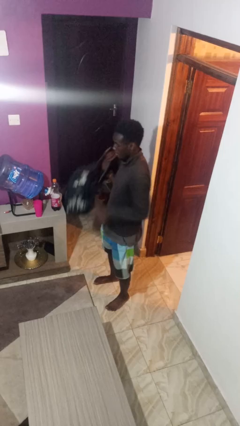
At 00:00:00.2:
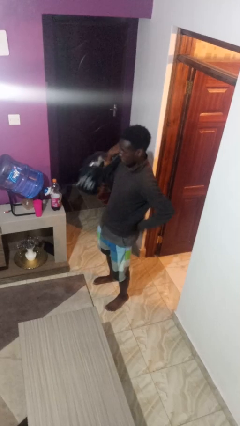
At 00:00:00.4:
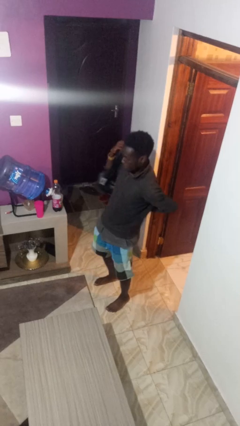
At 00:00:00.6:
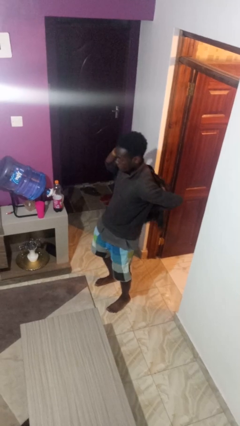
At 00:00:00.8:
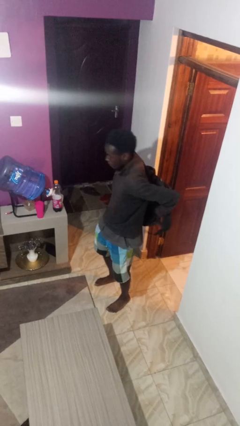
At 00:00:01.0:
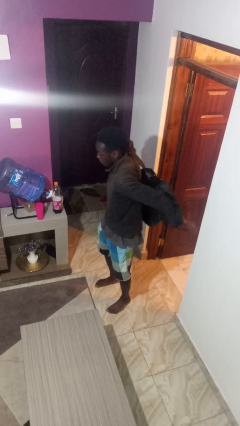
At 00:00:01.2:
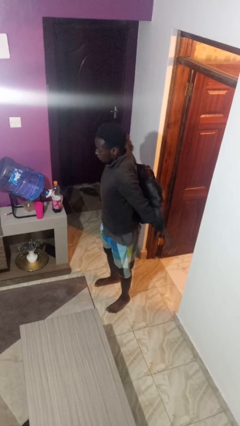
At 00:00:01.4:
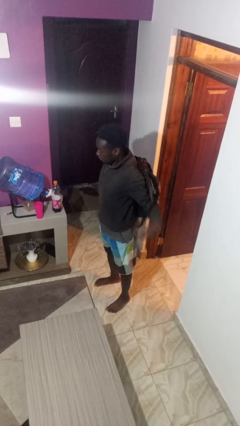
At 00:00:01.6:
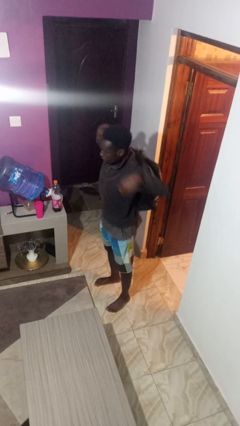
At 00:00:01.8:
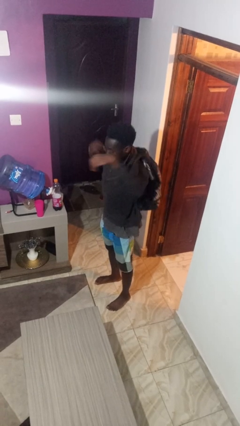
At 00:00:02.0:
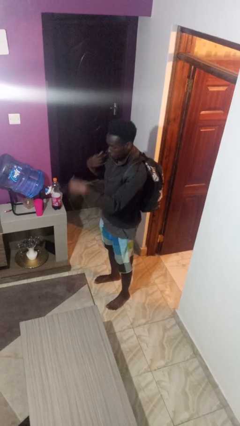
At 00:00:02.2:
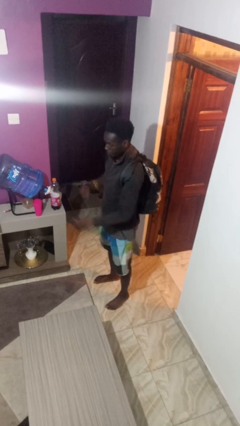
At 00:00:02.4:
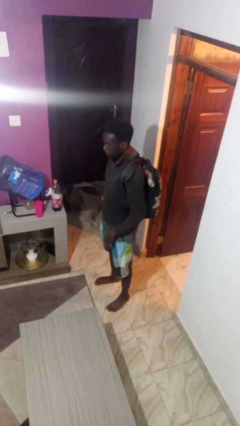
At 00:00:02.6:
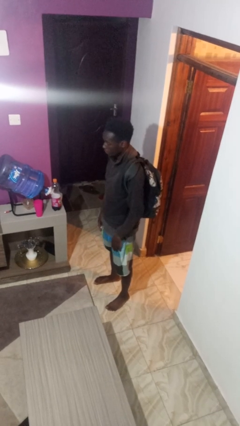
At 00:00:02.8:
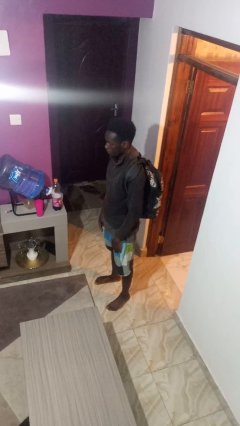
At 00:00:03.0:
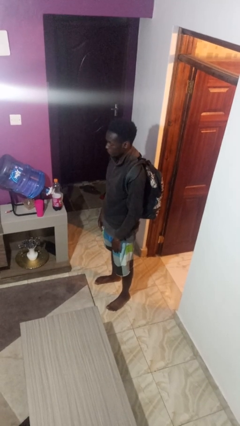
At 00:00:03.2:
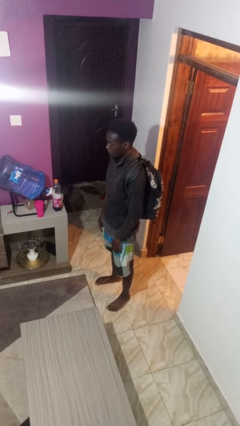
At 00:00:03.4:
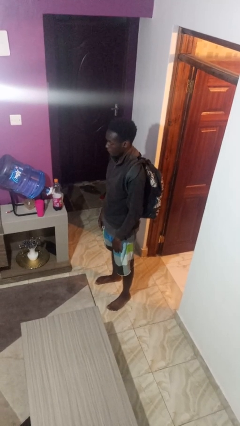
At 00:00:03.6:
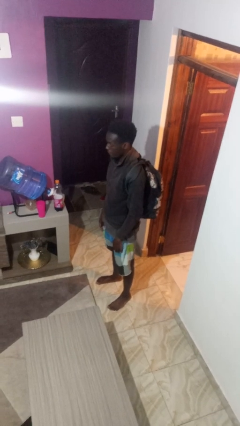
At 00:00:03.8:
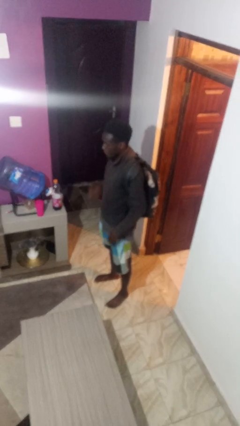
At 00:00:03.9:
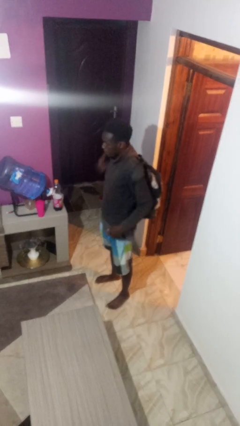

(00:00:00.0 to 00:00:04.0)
person puts on backpack

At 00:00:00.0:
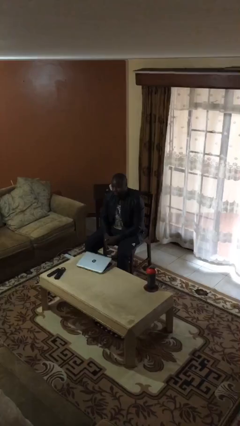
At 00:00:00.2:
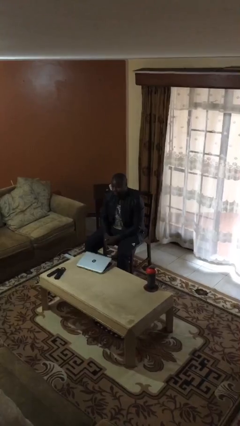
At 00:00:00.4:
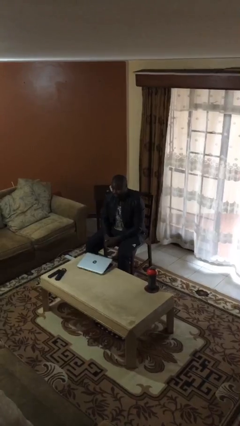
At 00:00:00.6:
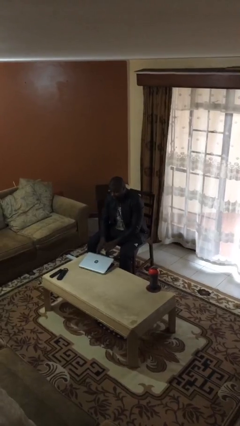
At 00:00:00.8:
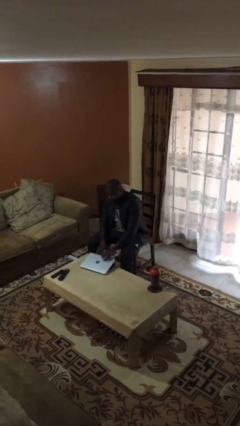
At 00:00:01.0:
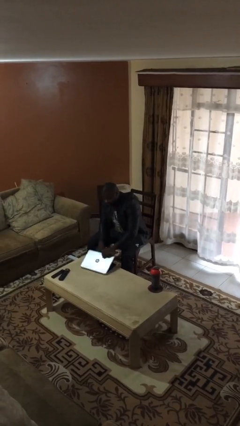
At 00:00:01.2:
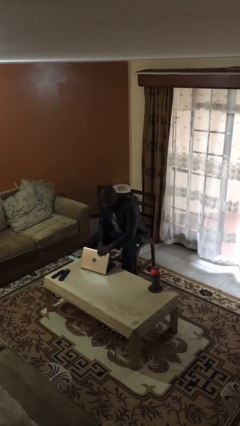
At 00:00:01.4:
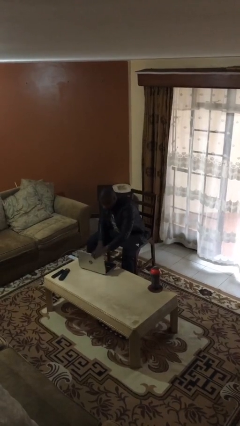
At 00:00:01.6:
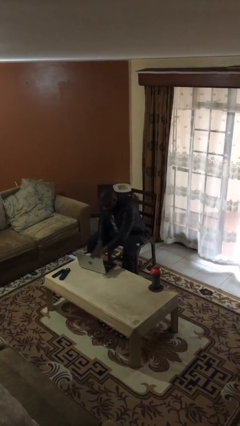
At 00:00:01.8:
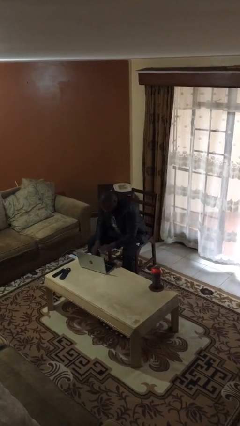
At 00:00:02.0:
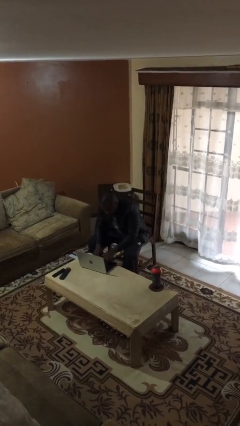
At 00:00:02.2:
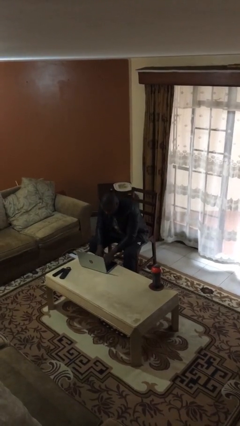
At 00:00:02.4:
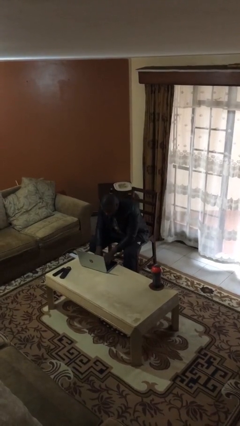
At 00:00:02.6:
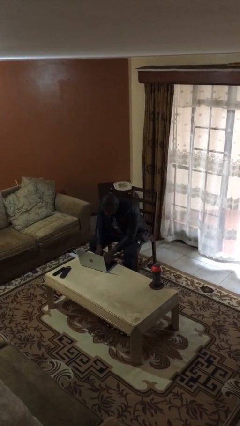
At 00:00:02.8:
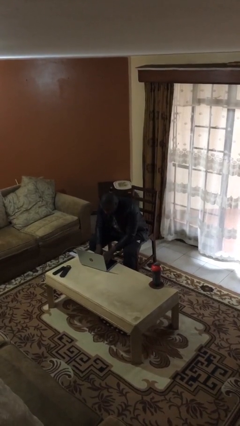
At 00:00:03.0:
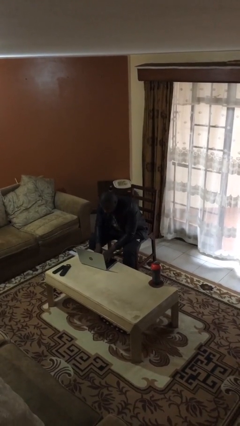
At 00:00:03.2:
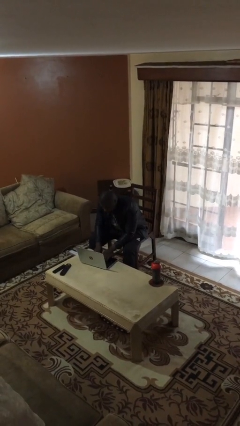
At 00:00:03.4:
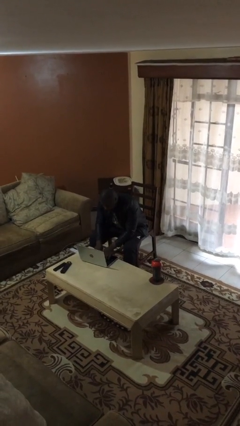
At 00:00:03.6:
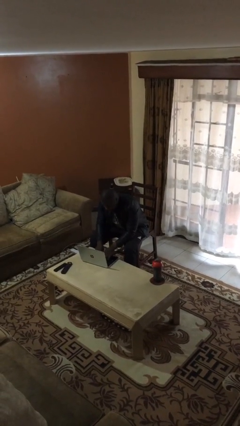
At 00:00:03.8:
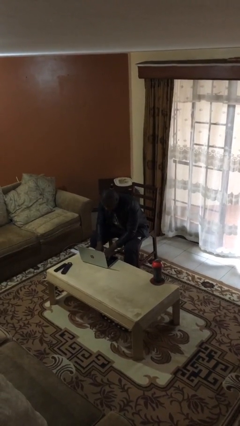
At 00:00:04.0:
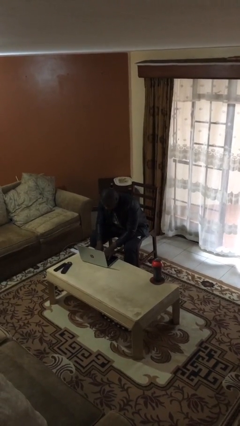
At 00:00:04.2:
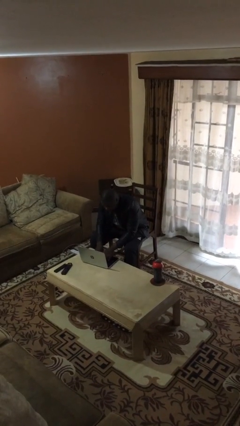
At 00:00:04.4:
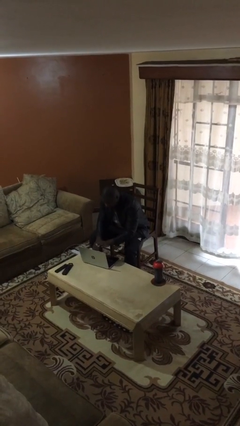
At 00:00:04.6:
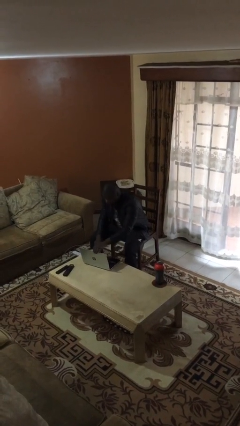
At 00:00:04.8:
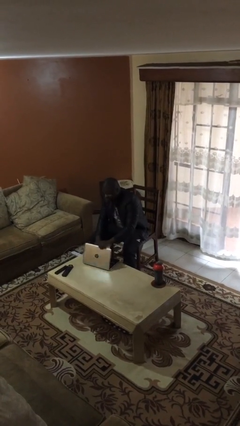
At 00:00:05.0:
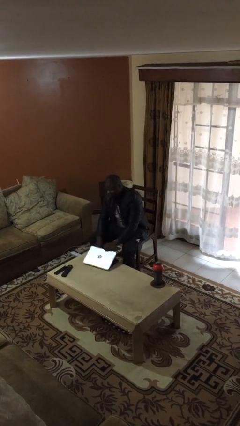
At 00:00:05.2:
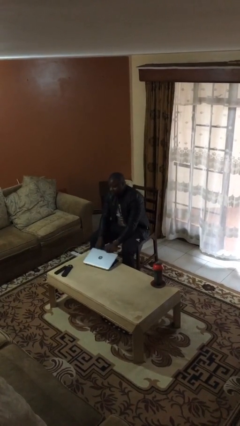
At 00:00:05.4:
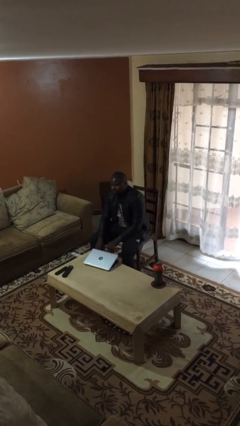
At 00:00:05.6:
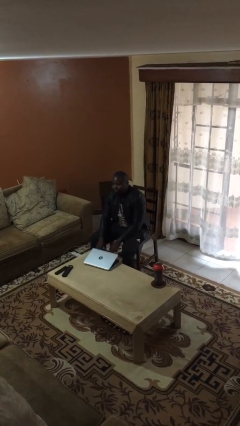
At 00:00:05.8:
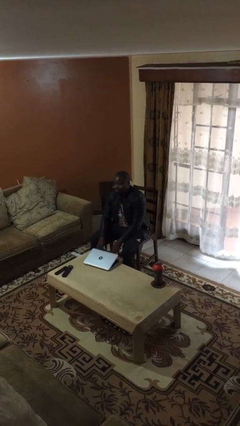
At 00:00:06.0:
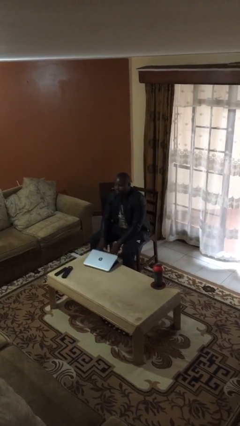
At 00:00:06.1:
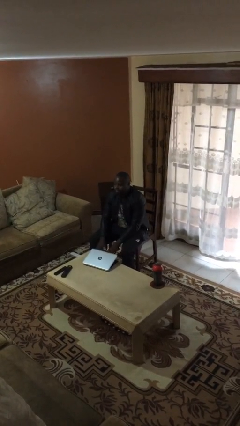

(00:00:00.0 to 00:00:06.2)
person interacts with laptop

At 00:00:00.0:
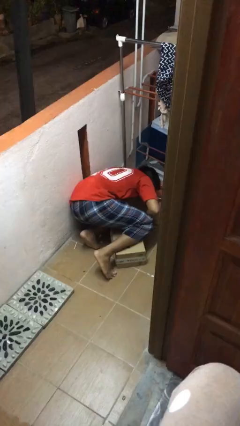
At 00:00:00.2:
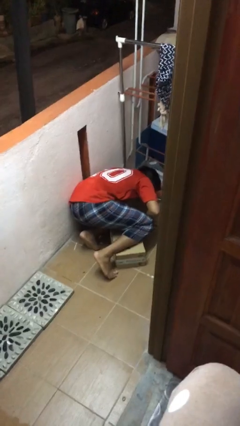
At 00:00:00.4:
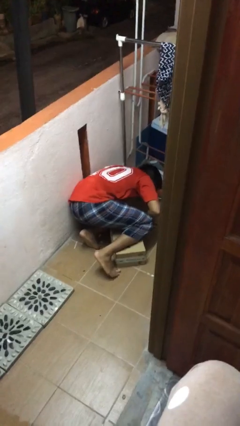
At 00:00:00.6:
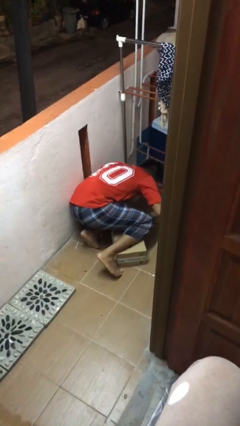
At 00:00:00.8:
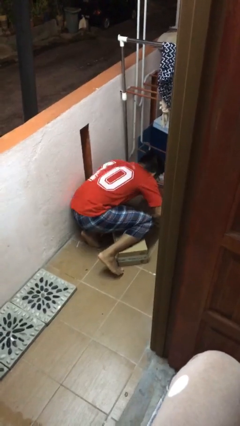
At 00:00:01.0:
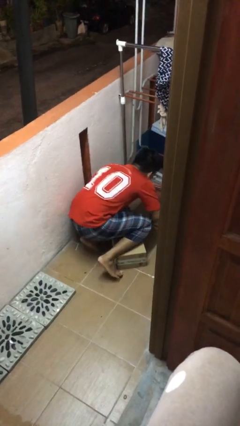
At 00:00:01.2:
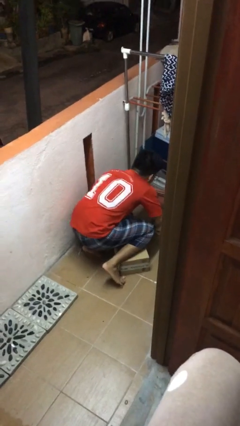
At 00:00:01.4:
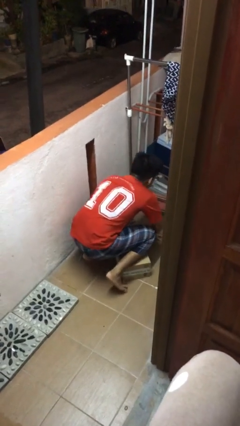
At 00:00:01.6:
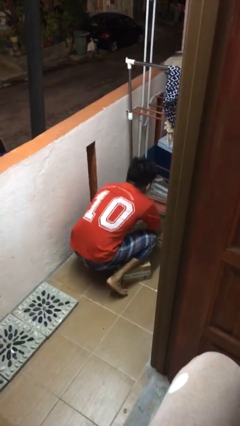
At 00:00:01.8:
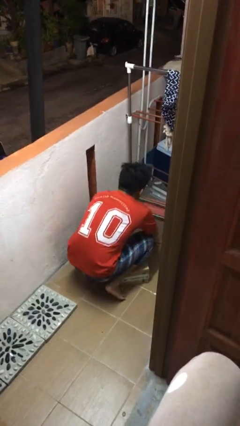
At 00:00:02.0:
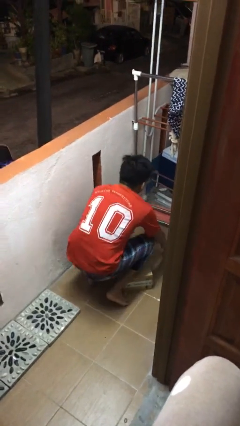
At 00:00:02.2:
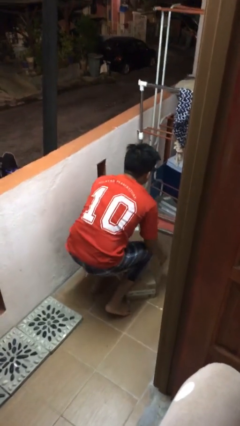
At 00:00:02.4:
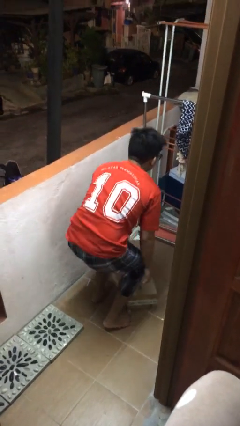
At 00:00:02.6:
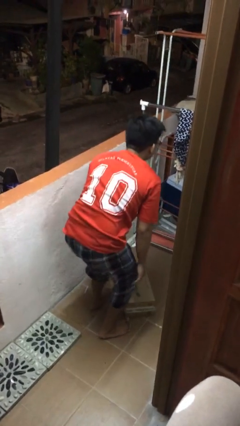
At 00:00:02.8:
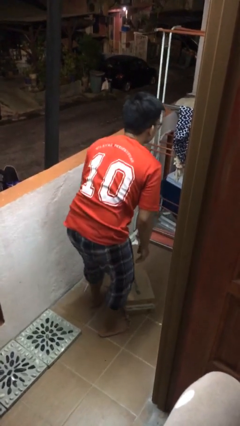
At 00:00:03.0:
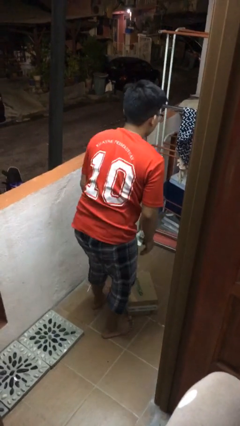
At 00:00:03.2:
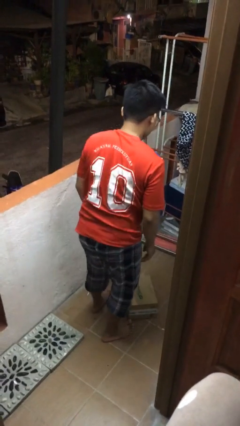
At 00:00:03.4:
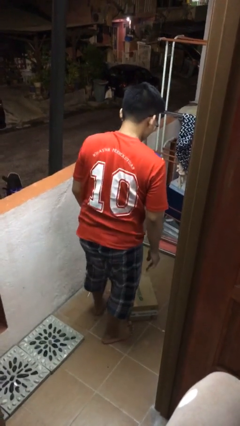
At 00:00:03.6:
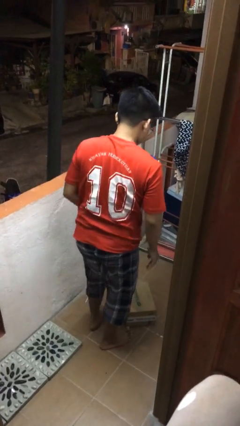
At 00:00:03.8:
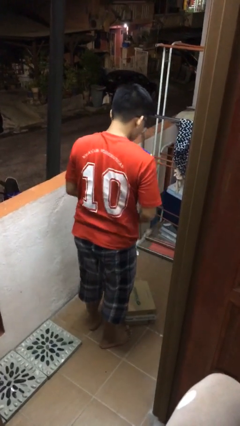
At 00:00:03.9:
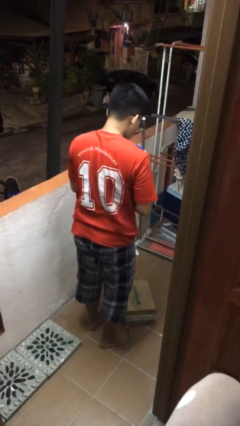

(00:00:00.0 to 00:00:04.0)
person stands up from floor

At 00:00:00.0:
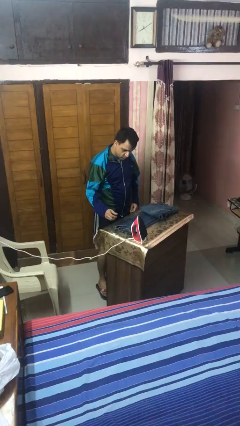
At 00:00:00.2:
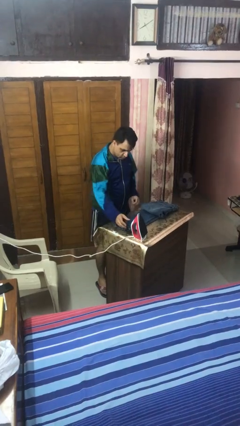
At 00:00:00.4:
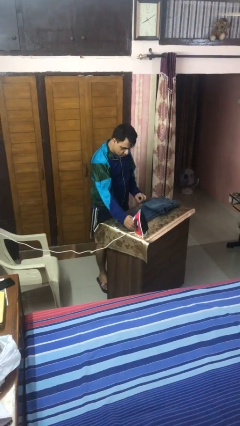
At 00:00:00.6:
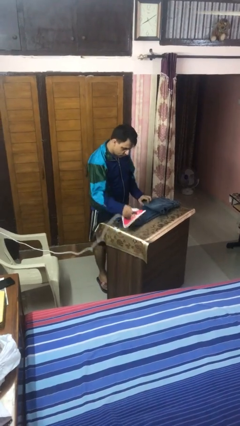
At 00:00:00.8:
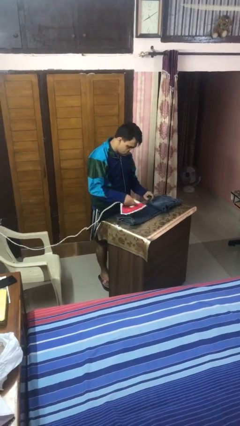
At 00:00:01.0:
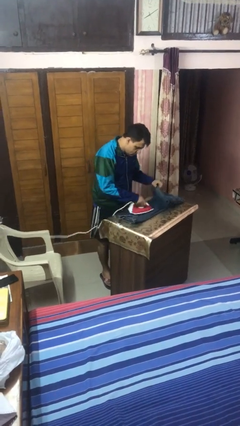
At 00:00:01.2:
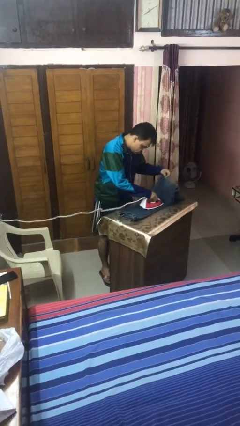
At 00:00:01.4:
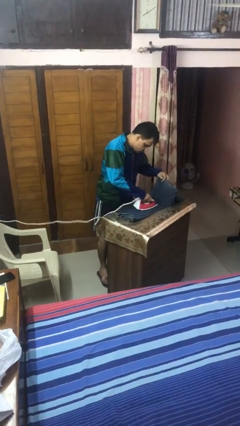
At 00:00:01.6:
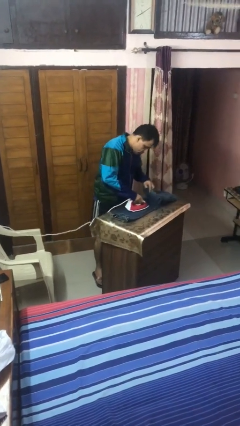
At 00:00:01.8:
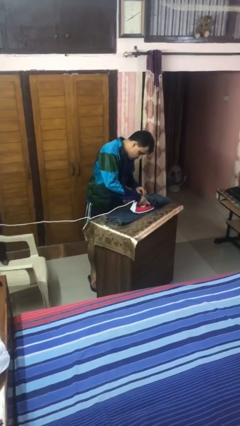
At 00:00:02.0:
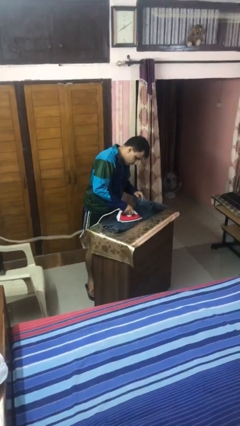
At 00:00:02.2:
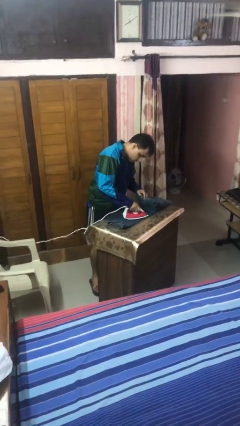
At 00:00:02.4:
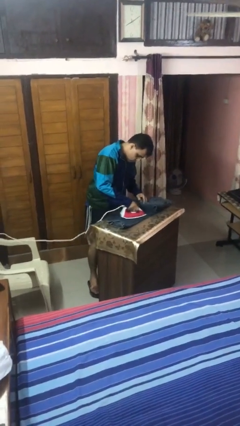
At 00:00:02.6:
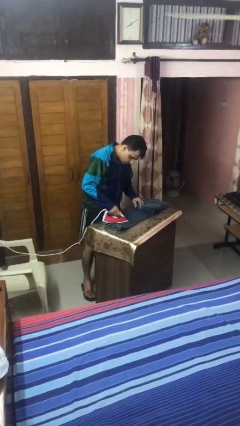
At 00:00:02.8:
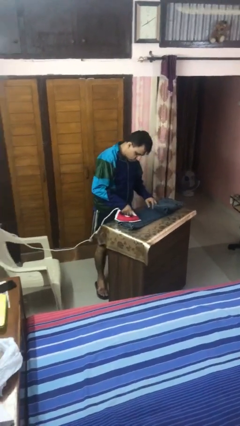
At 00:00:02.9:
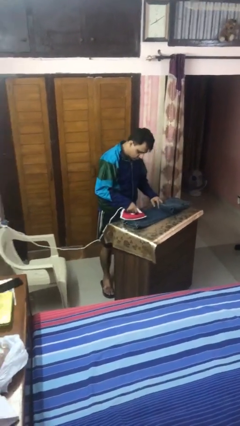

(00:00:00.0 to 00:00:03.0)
person irons clothes

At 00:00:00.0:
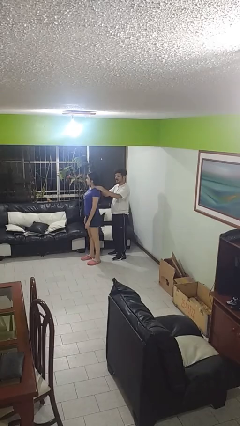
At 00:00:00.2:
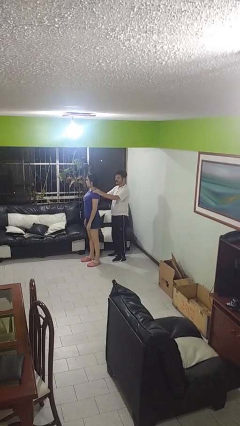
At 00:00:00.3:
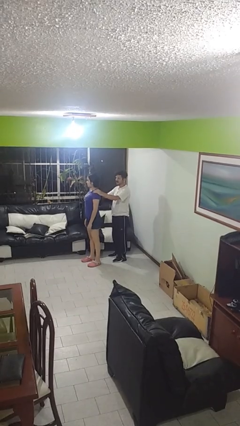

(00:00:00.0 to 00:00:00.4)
person grabs person by shoulder
